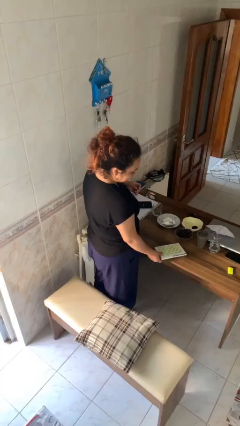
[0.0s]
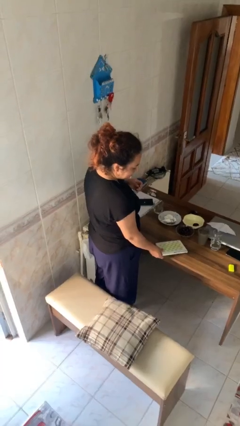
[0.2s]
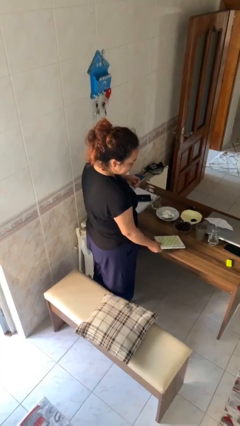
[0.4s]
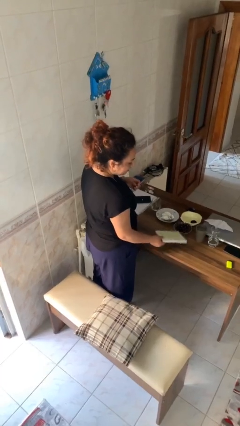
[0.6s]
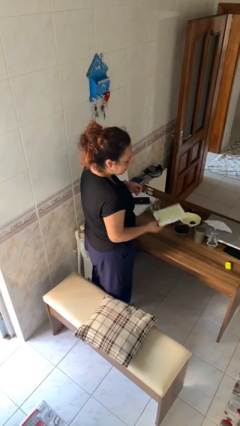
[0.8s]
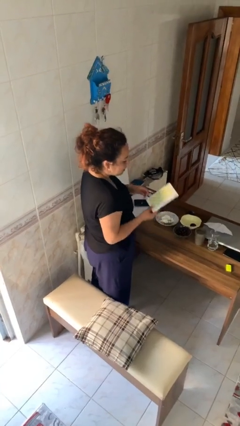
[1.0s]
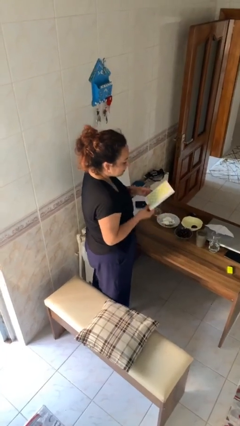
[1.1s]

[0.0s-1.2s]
person picks up object from table

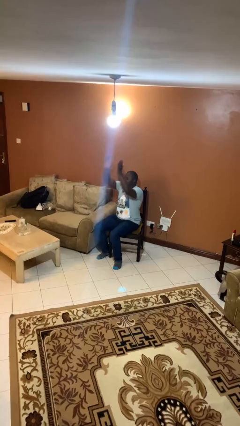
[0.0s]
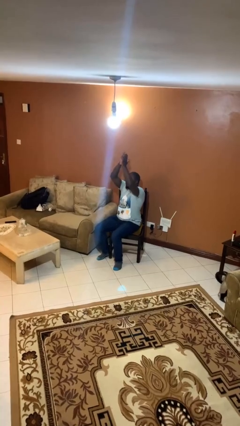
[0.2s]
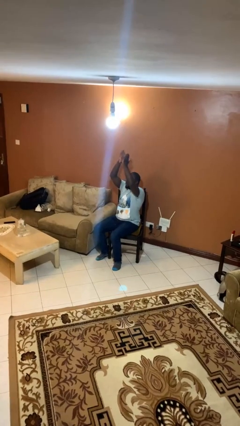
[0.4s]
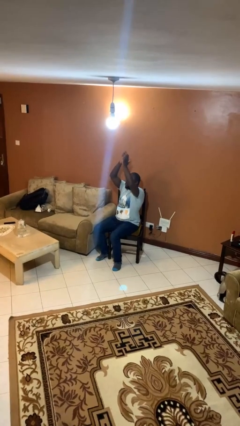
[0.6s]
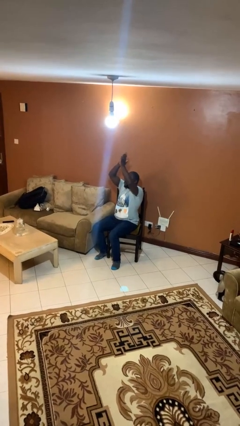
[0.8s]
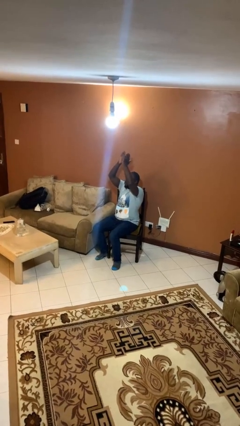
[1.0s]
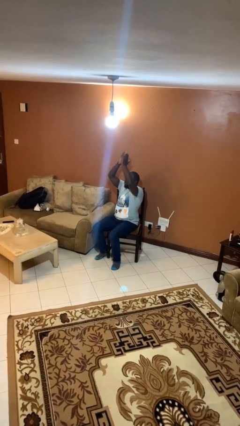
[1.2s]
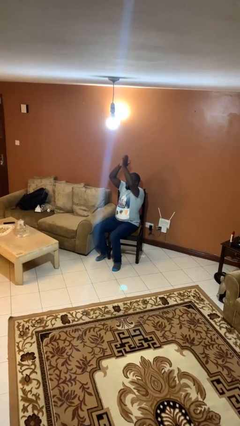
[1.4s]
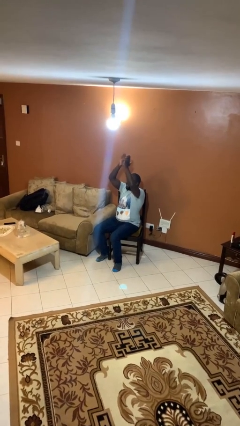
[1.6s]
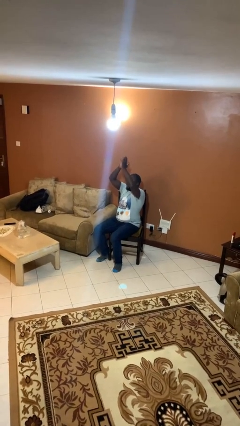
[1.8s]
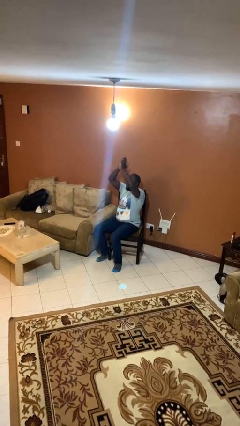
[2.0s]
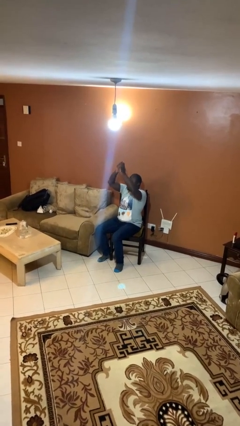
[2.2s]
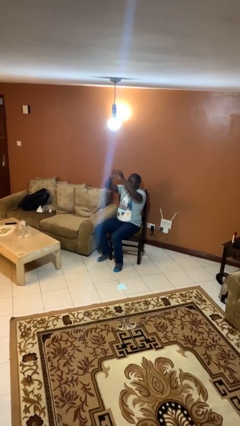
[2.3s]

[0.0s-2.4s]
person claps hands

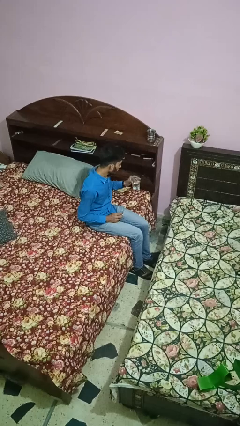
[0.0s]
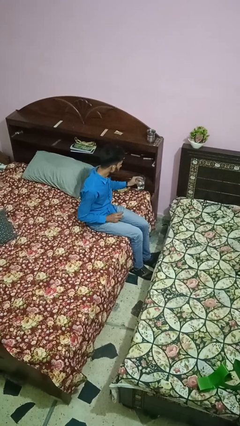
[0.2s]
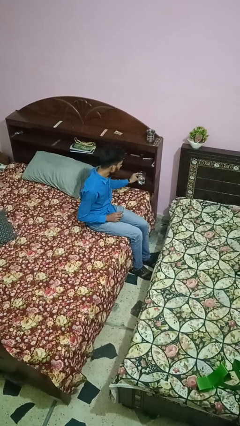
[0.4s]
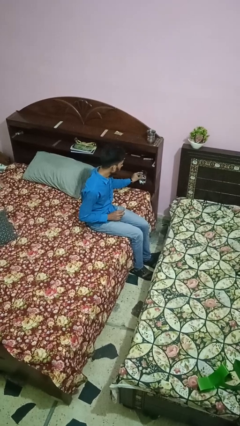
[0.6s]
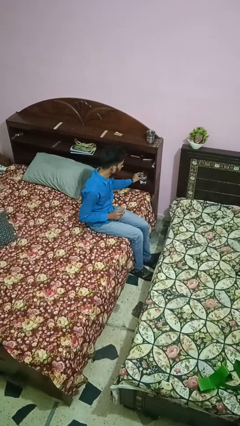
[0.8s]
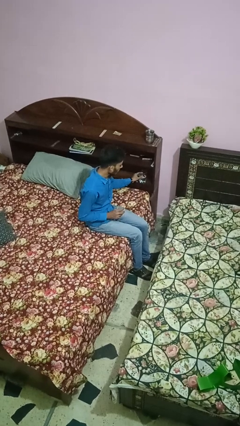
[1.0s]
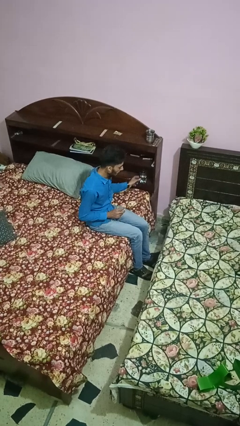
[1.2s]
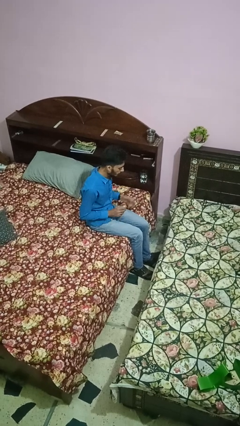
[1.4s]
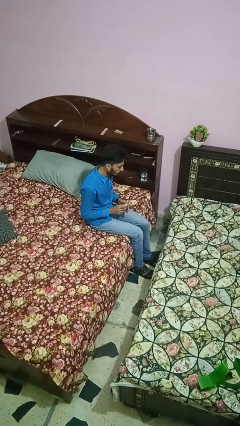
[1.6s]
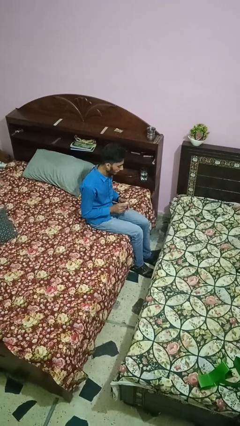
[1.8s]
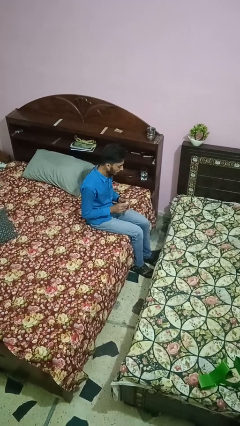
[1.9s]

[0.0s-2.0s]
person drinks from cup

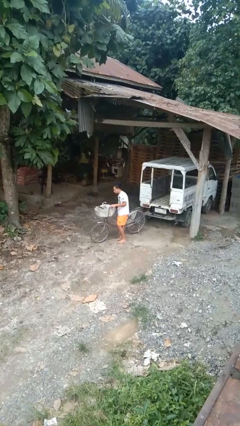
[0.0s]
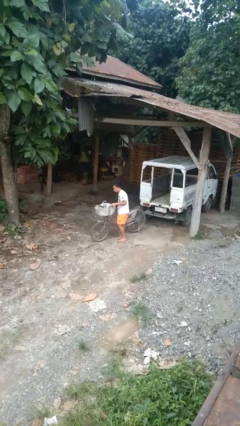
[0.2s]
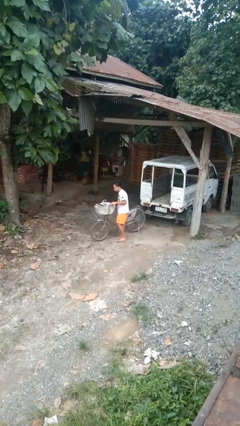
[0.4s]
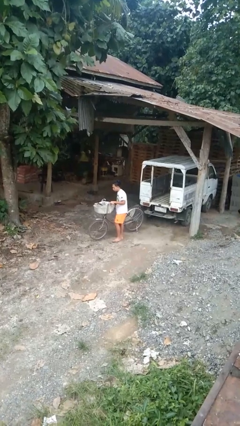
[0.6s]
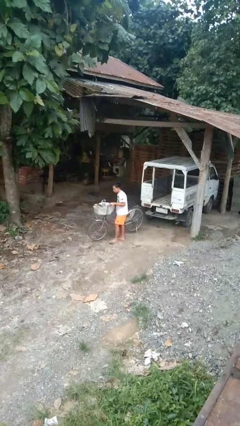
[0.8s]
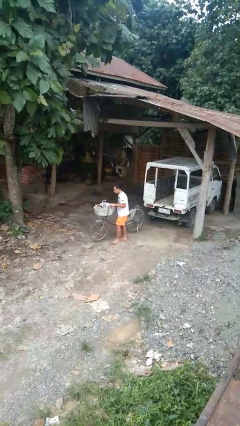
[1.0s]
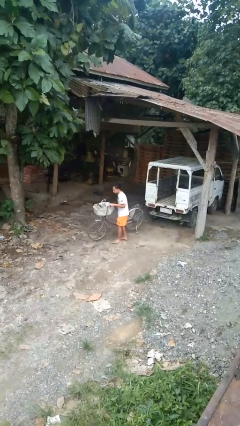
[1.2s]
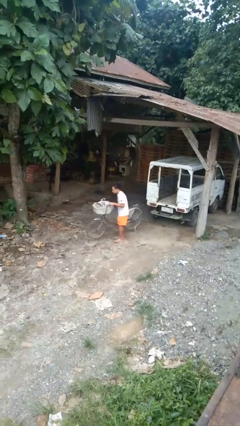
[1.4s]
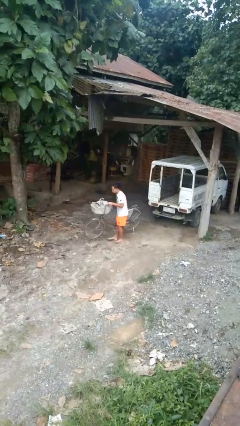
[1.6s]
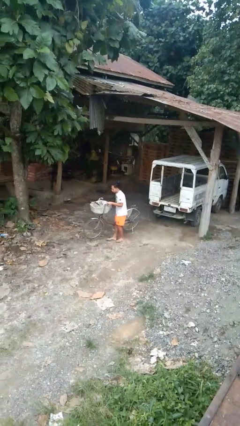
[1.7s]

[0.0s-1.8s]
person carries bicycle

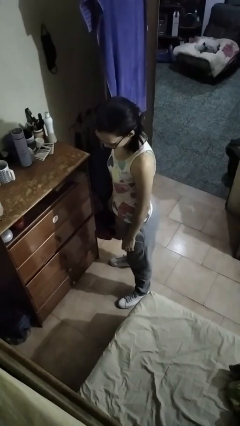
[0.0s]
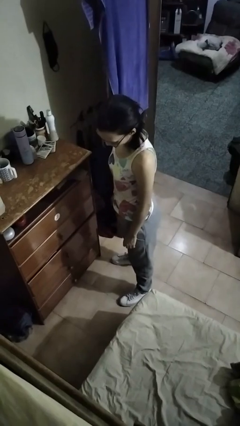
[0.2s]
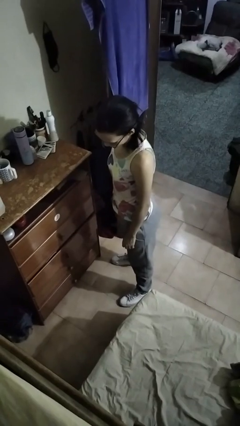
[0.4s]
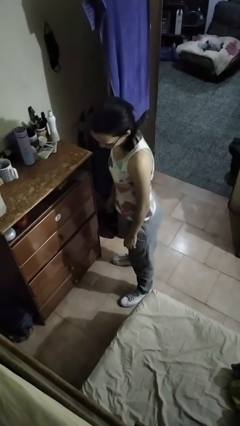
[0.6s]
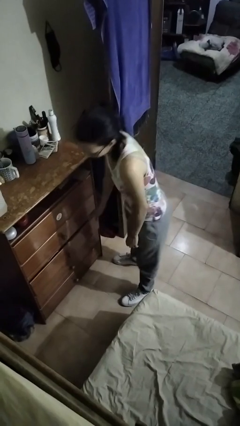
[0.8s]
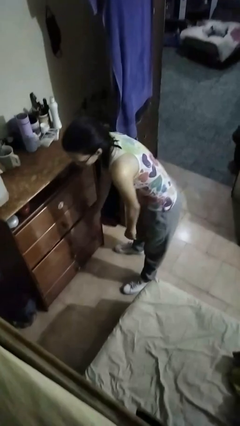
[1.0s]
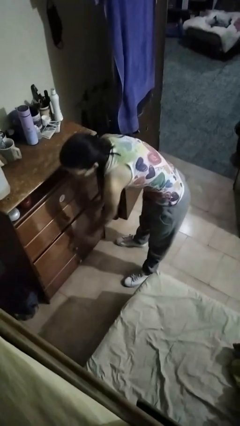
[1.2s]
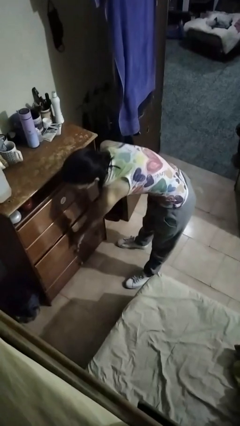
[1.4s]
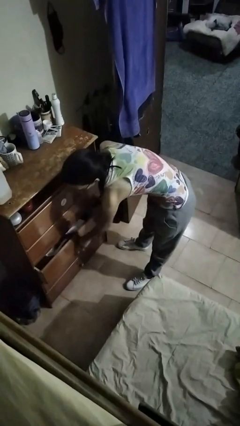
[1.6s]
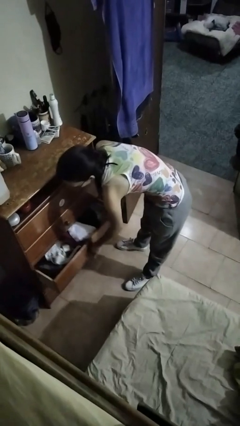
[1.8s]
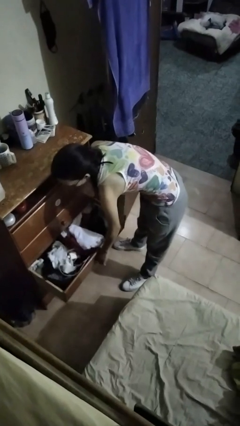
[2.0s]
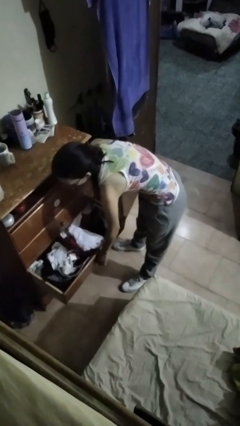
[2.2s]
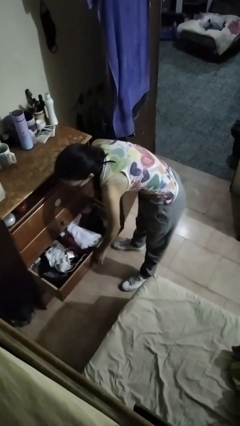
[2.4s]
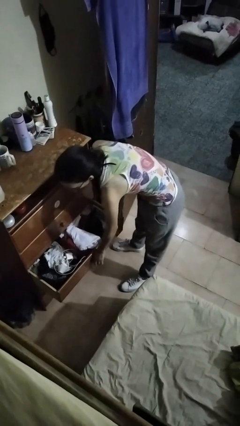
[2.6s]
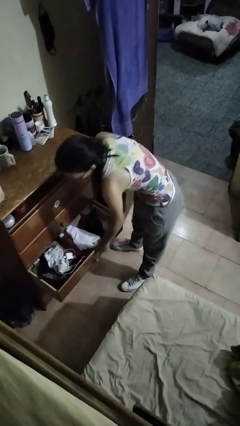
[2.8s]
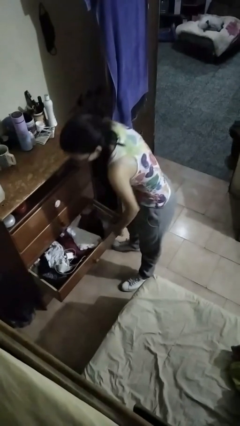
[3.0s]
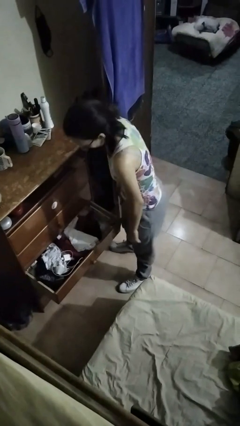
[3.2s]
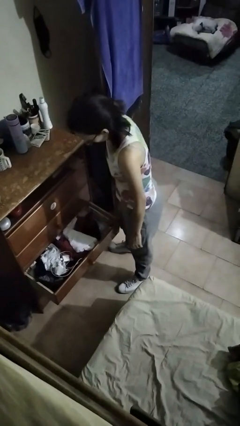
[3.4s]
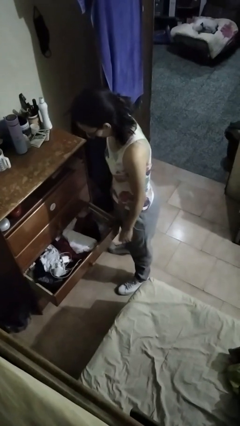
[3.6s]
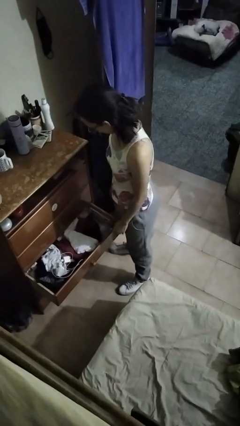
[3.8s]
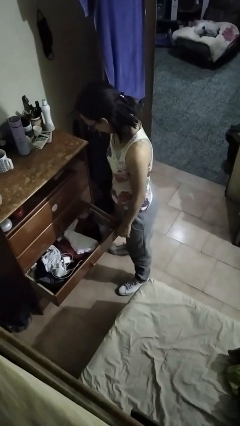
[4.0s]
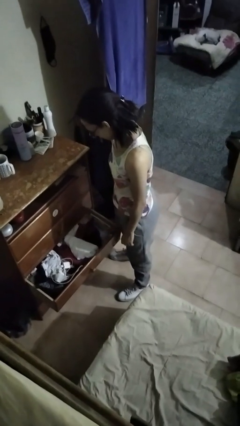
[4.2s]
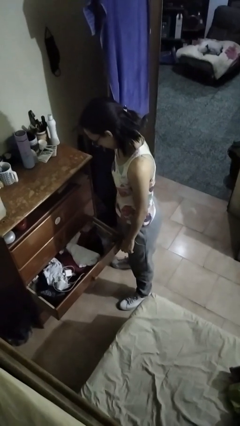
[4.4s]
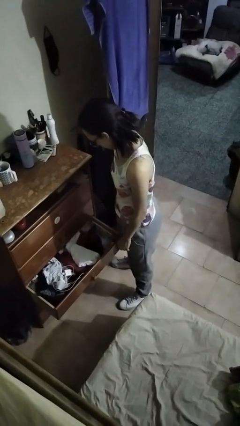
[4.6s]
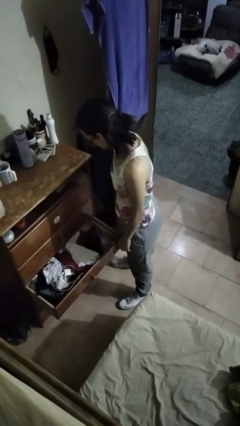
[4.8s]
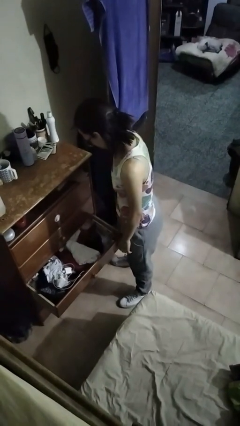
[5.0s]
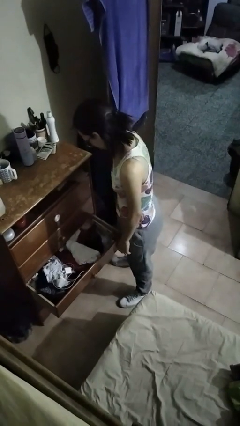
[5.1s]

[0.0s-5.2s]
person opens dresser drawer

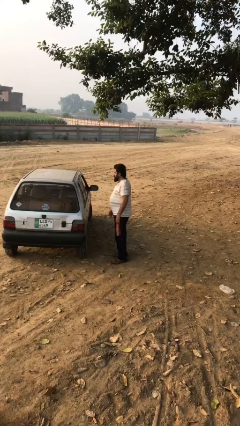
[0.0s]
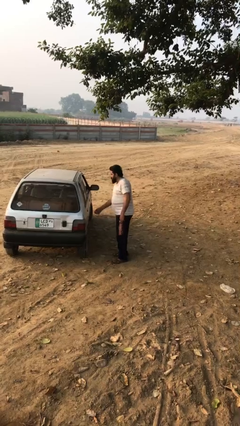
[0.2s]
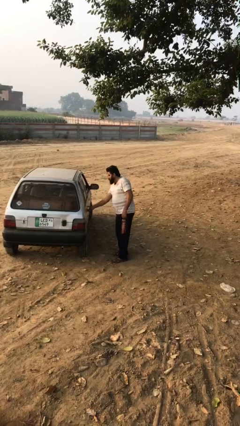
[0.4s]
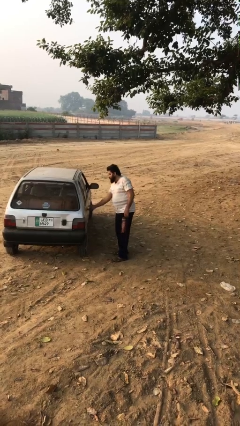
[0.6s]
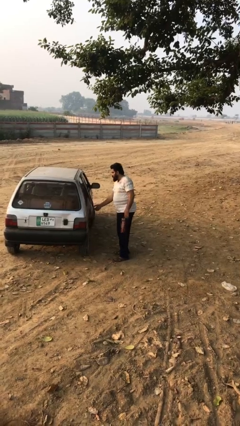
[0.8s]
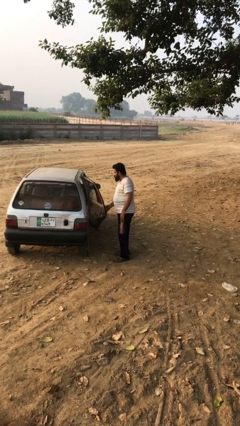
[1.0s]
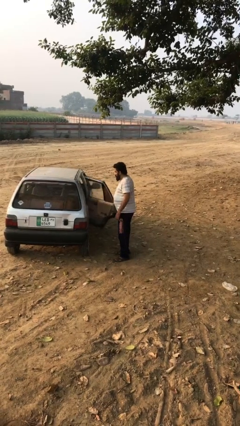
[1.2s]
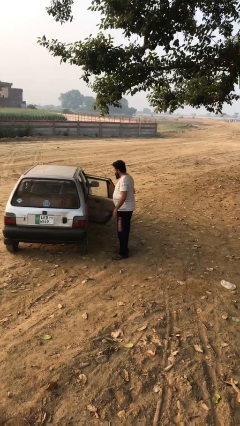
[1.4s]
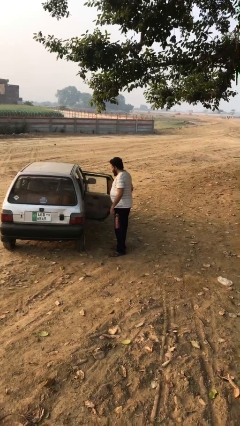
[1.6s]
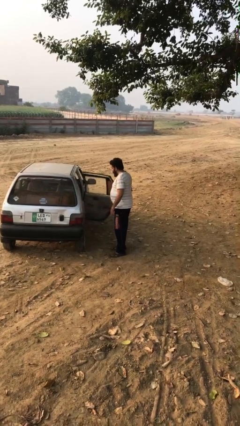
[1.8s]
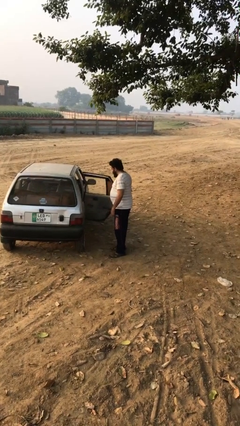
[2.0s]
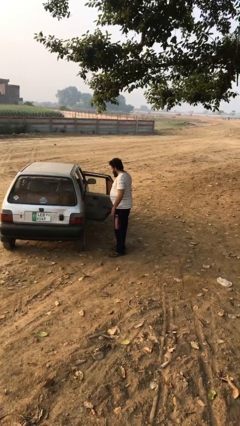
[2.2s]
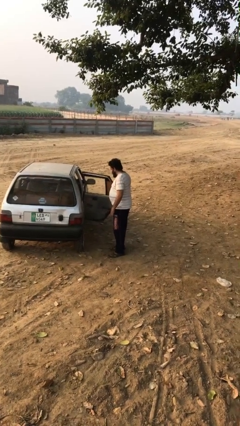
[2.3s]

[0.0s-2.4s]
person opens car door

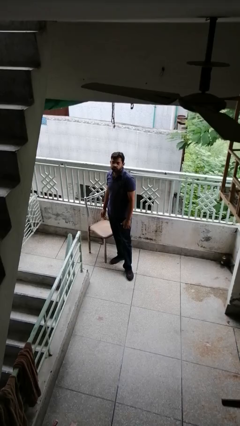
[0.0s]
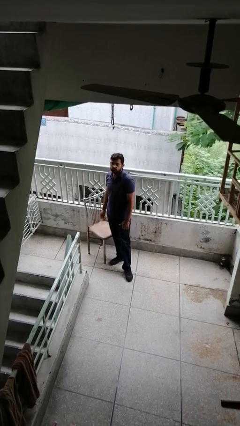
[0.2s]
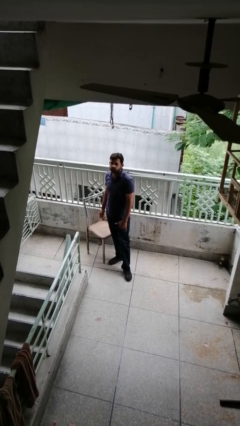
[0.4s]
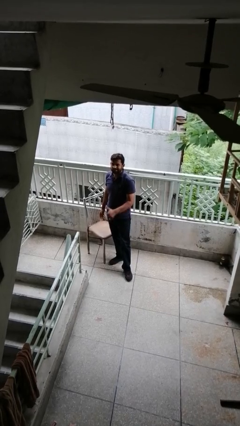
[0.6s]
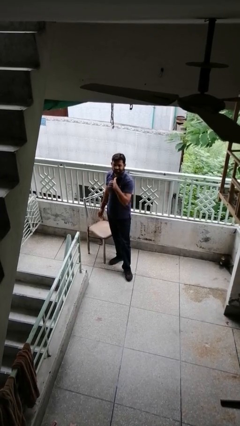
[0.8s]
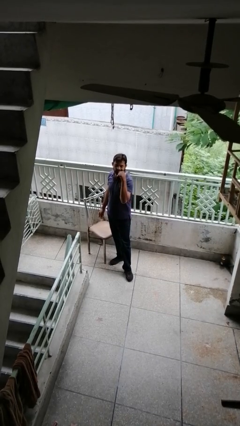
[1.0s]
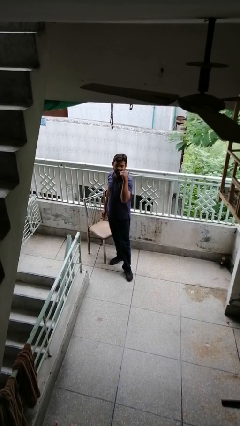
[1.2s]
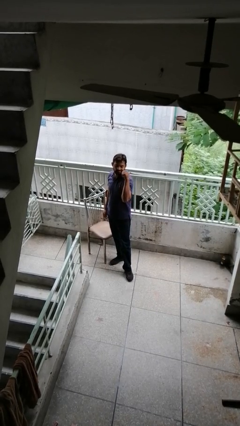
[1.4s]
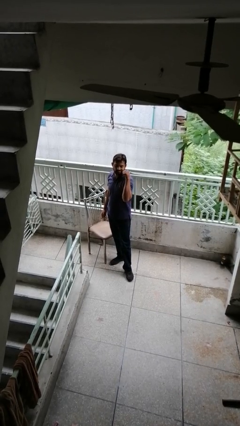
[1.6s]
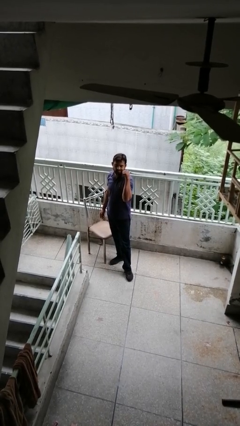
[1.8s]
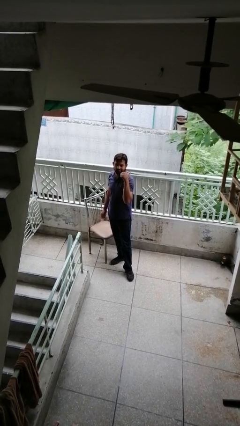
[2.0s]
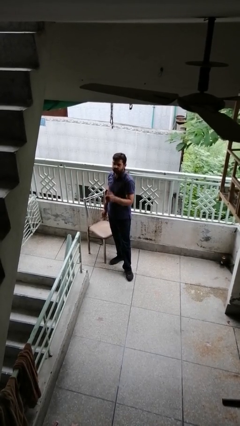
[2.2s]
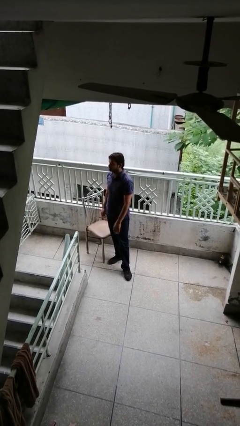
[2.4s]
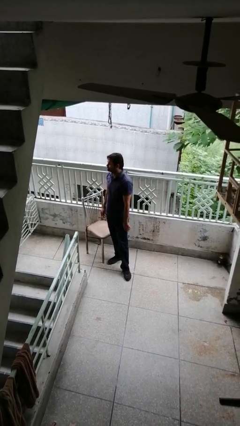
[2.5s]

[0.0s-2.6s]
person gestures behind me
